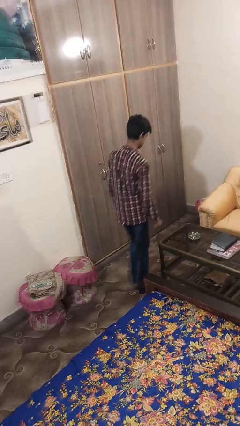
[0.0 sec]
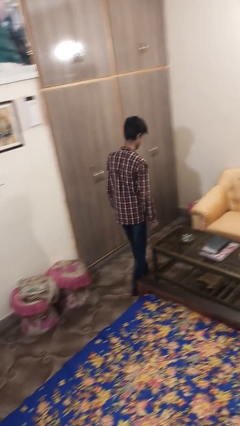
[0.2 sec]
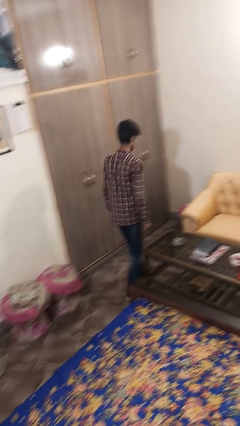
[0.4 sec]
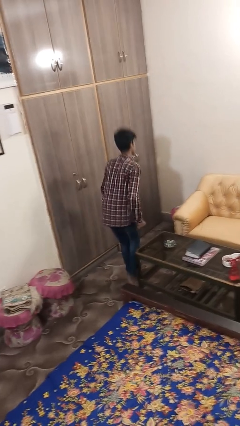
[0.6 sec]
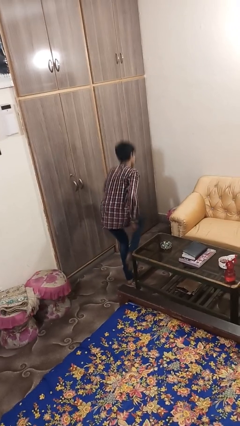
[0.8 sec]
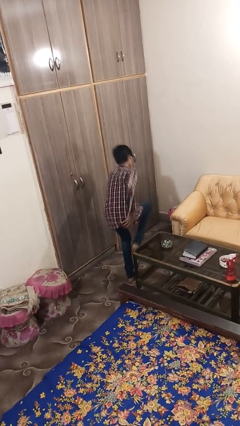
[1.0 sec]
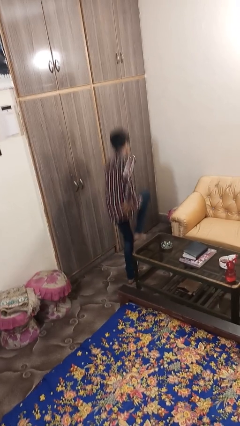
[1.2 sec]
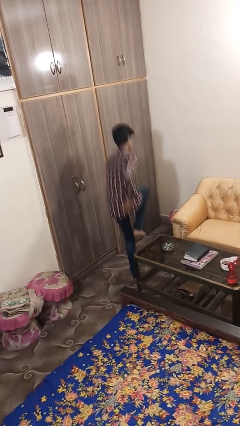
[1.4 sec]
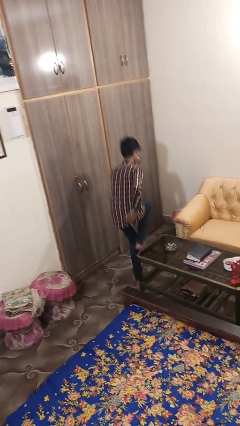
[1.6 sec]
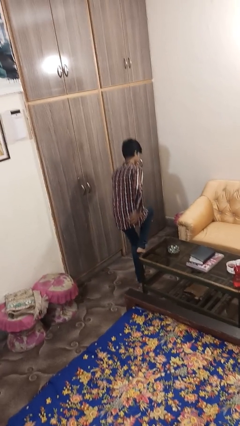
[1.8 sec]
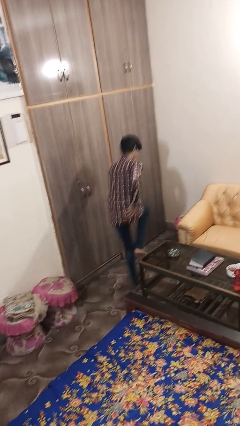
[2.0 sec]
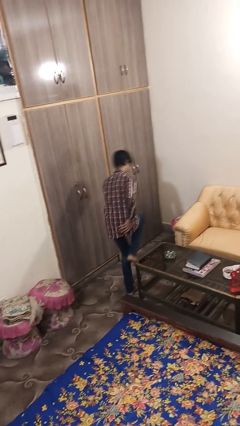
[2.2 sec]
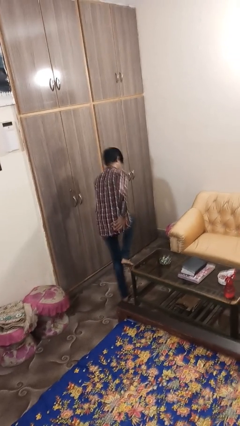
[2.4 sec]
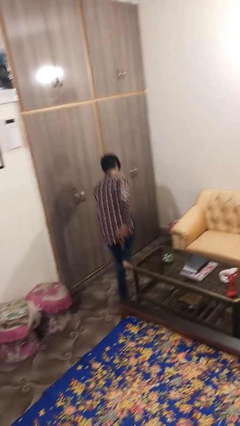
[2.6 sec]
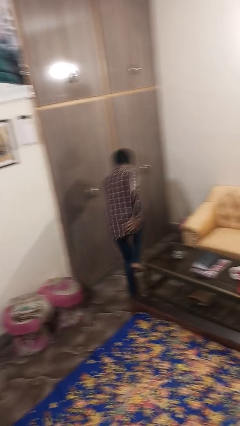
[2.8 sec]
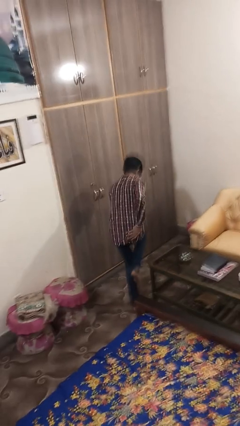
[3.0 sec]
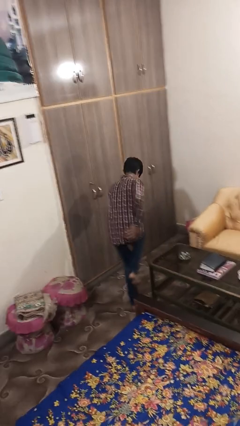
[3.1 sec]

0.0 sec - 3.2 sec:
person bumps into table

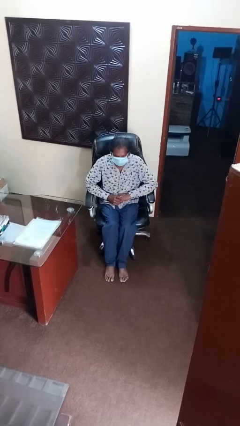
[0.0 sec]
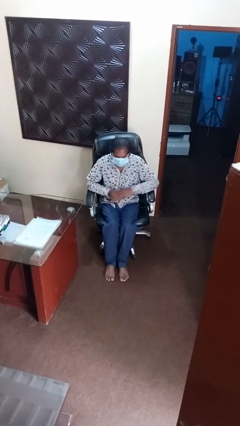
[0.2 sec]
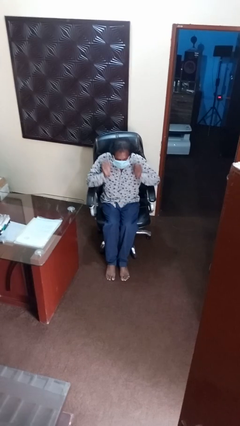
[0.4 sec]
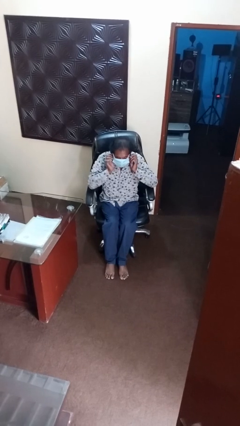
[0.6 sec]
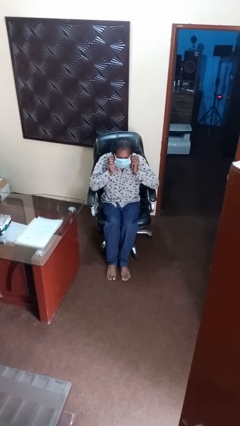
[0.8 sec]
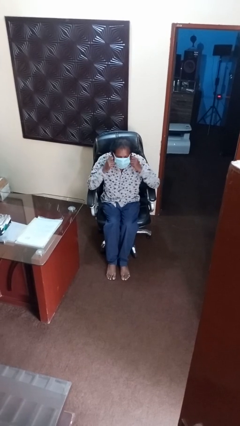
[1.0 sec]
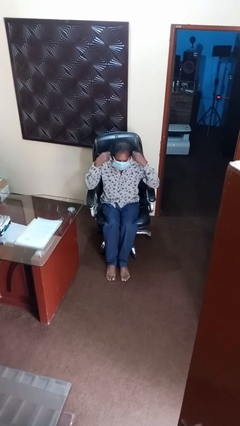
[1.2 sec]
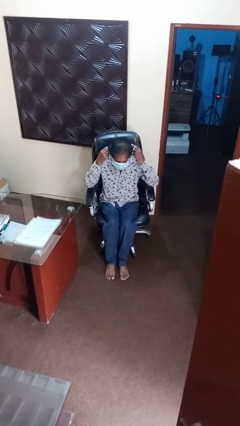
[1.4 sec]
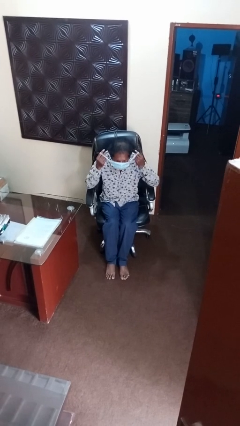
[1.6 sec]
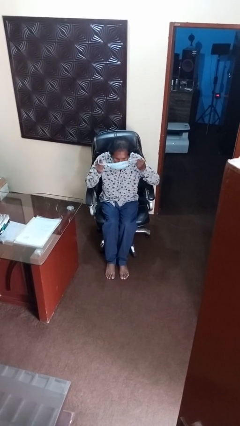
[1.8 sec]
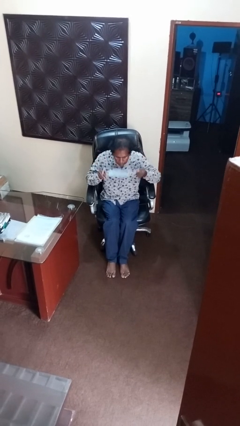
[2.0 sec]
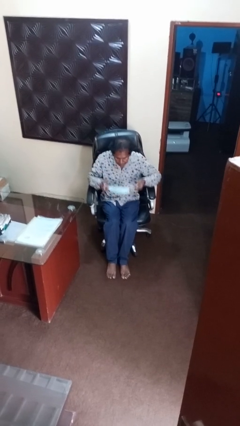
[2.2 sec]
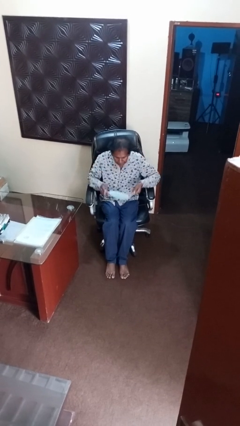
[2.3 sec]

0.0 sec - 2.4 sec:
person takes off facemask

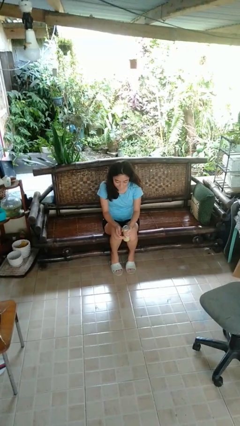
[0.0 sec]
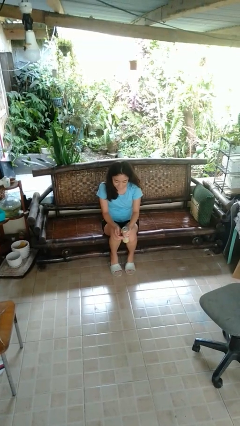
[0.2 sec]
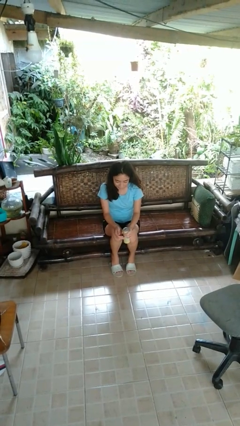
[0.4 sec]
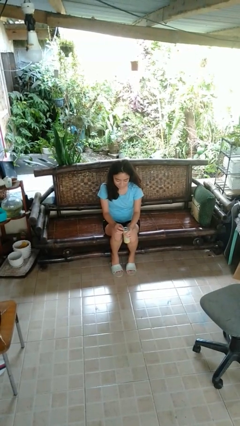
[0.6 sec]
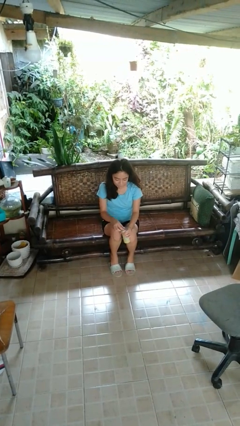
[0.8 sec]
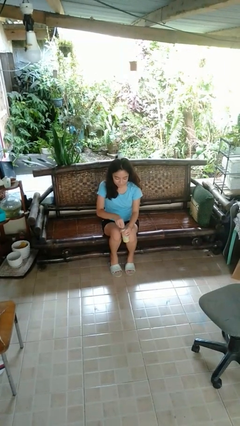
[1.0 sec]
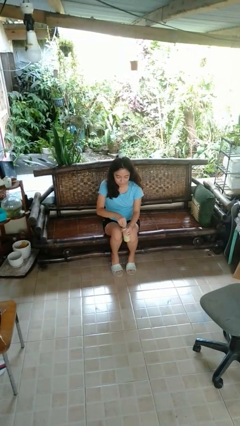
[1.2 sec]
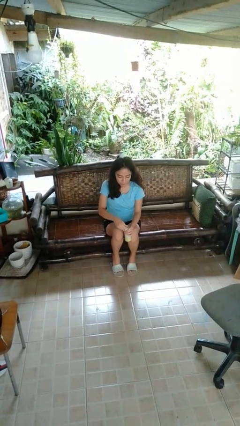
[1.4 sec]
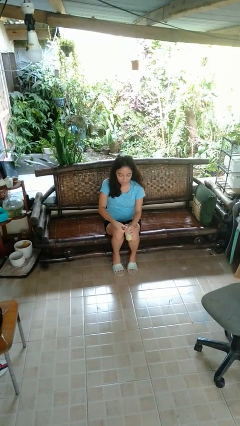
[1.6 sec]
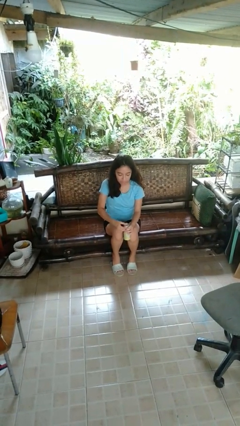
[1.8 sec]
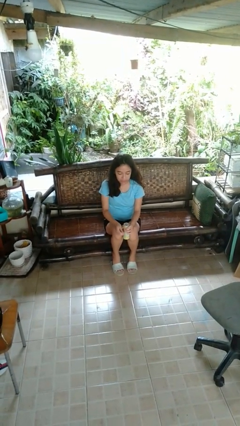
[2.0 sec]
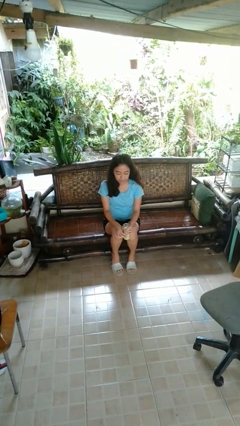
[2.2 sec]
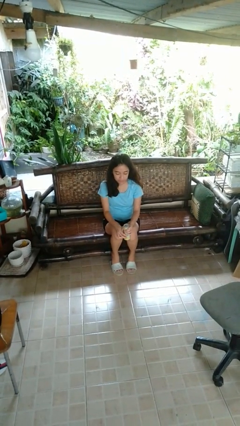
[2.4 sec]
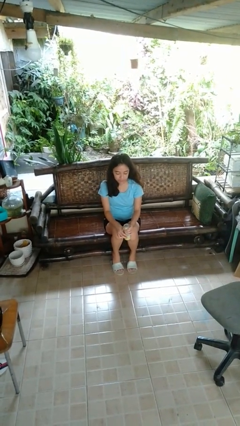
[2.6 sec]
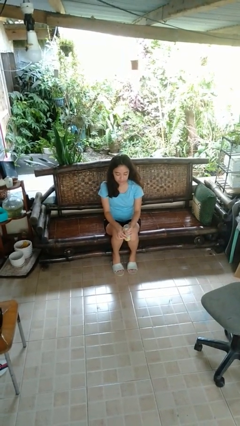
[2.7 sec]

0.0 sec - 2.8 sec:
person opens beverage can

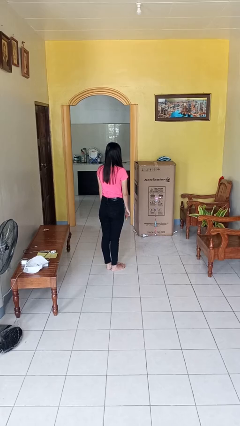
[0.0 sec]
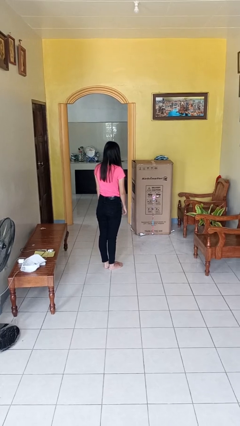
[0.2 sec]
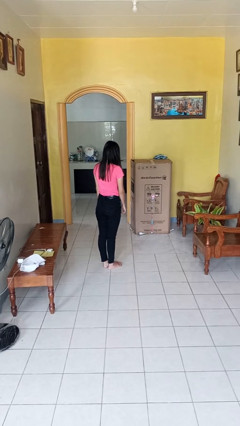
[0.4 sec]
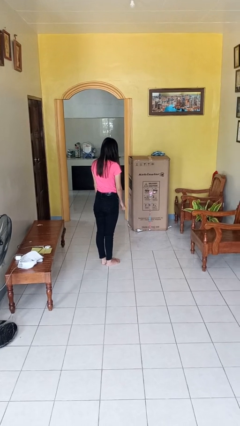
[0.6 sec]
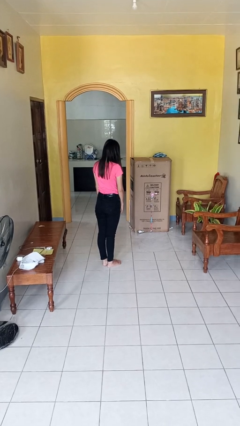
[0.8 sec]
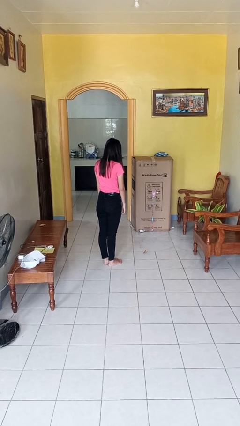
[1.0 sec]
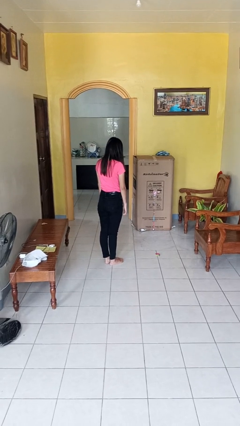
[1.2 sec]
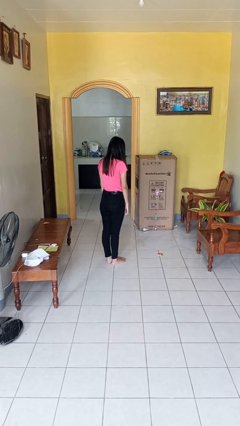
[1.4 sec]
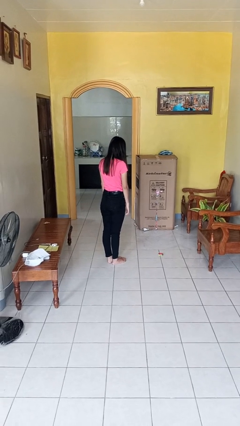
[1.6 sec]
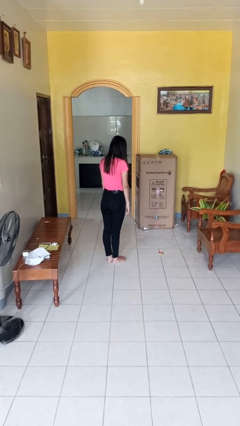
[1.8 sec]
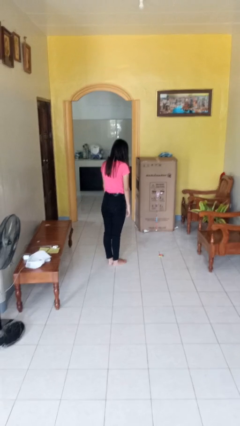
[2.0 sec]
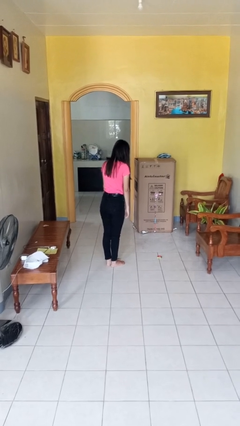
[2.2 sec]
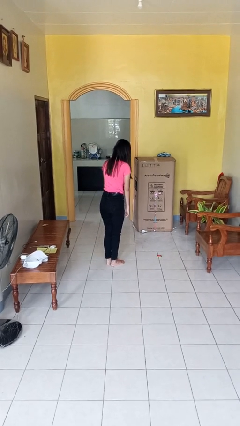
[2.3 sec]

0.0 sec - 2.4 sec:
person throws object to ground

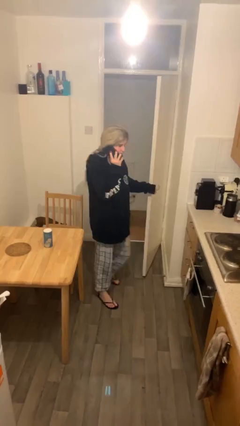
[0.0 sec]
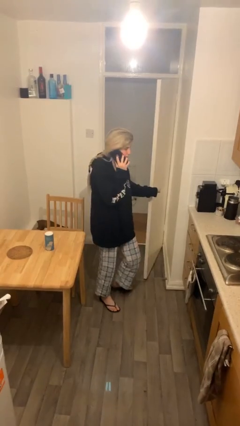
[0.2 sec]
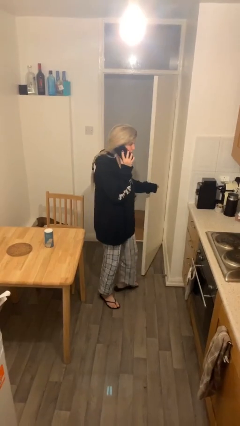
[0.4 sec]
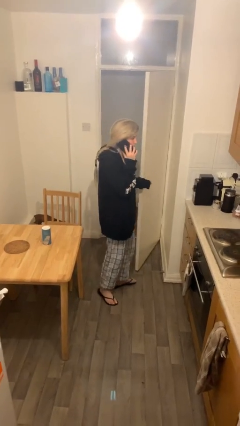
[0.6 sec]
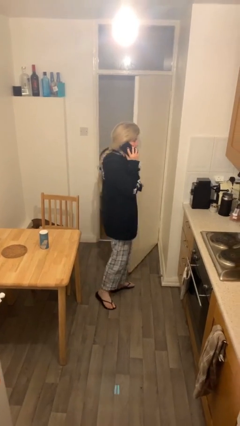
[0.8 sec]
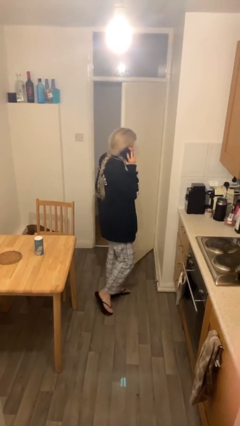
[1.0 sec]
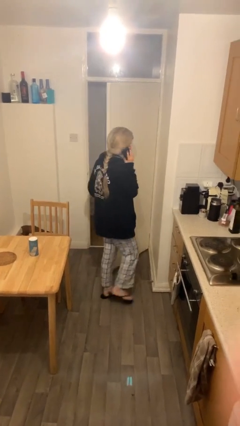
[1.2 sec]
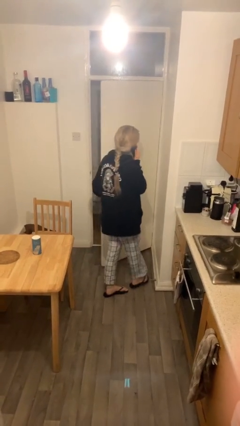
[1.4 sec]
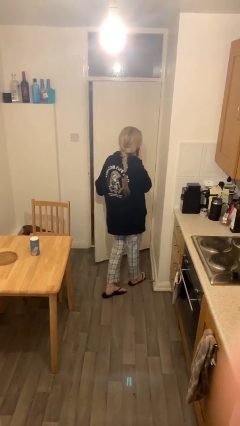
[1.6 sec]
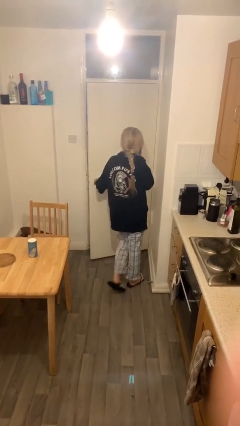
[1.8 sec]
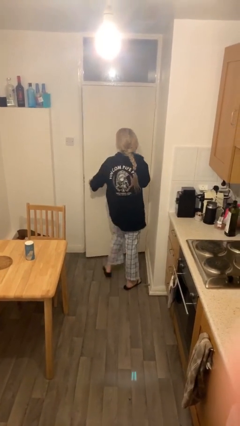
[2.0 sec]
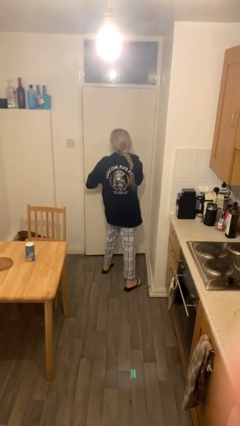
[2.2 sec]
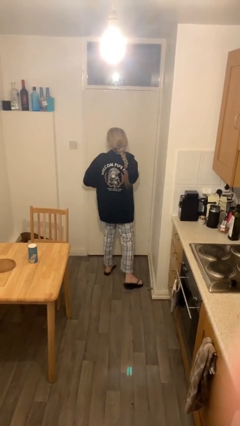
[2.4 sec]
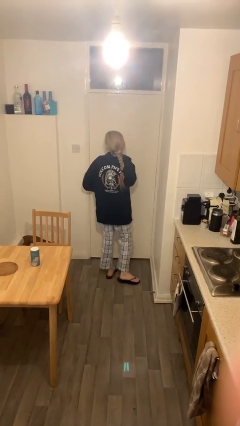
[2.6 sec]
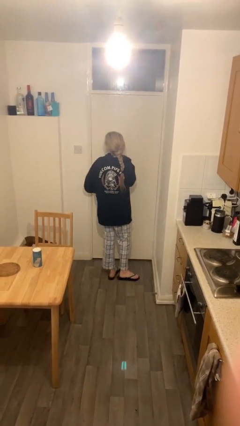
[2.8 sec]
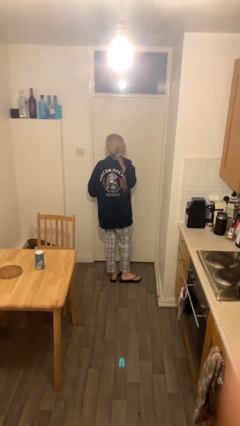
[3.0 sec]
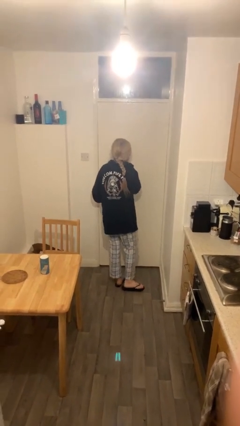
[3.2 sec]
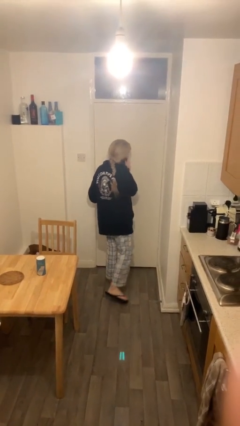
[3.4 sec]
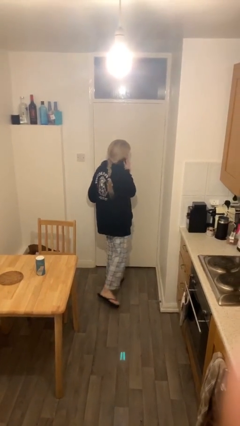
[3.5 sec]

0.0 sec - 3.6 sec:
person closes facility door

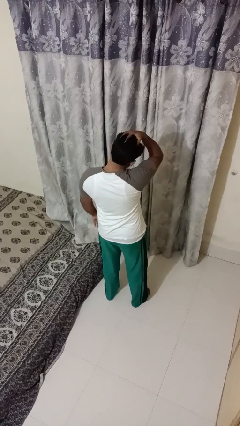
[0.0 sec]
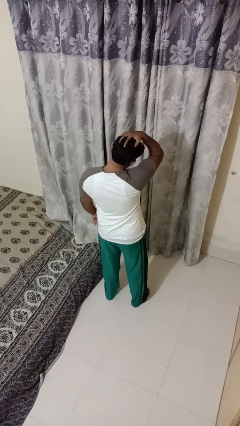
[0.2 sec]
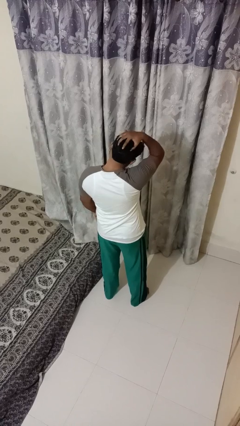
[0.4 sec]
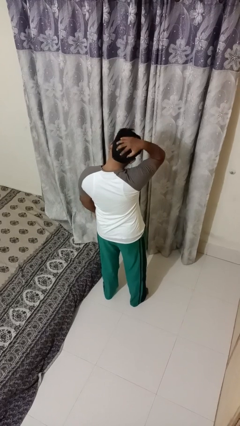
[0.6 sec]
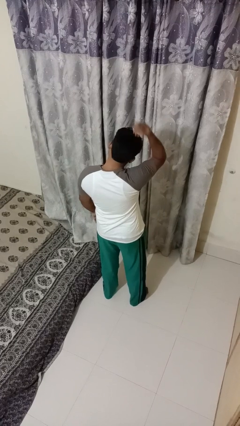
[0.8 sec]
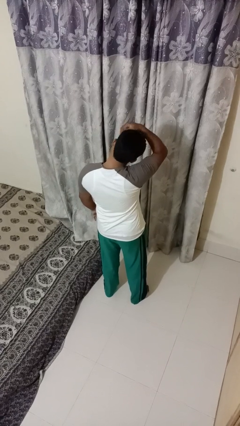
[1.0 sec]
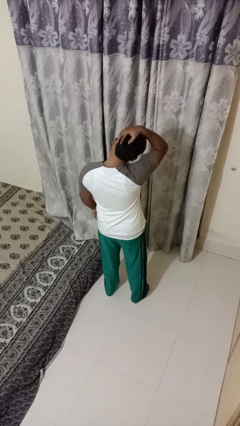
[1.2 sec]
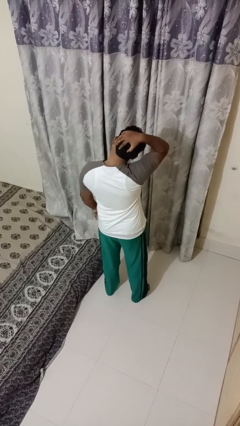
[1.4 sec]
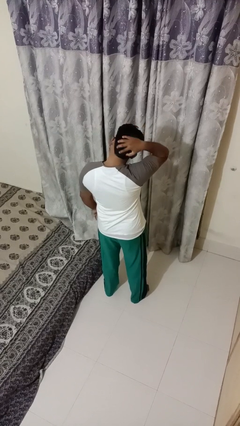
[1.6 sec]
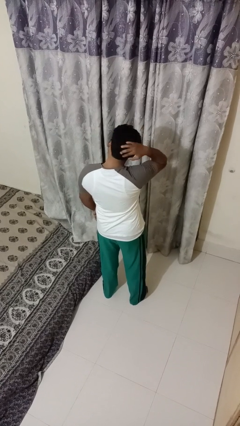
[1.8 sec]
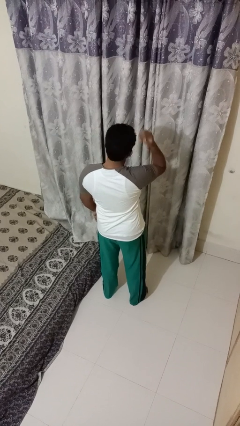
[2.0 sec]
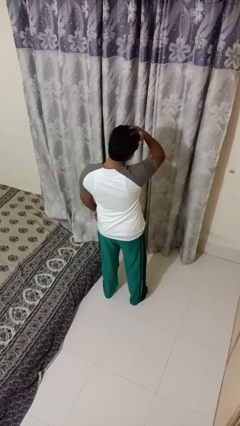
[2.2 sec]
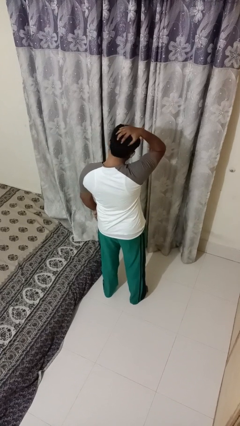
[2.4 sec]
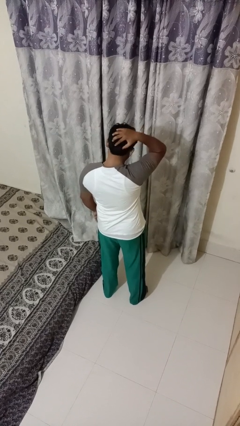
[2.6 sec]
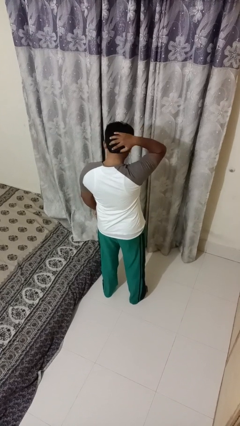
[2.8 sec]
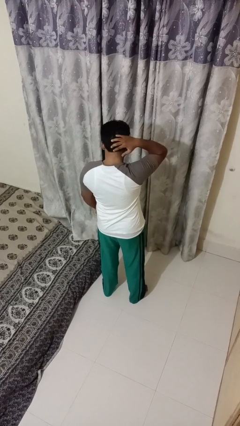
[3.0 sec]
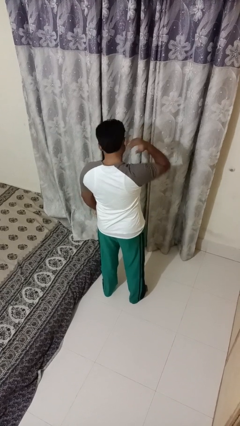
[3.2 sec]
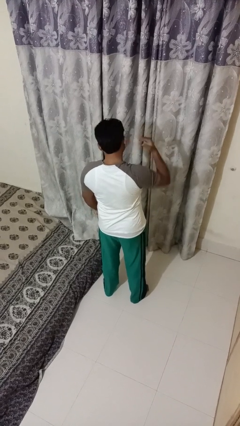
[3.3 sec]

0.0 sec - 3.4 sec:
person strokes hair
